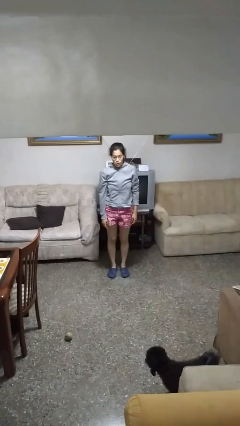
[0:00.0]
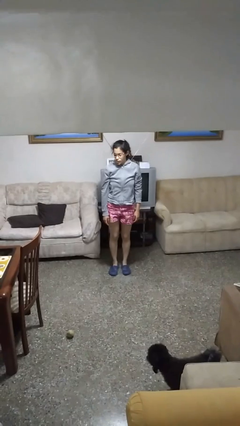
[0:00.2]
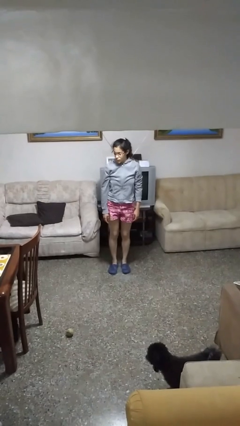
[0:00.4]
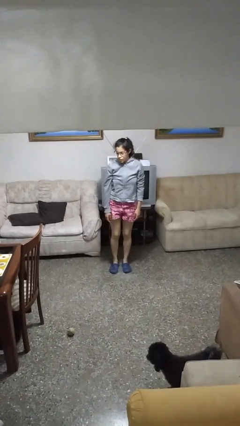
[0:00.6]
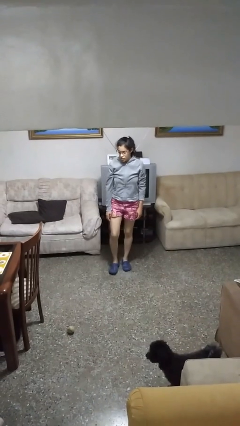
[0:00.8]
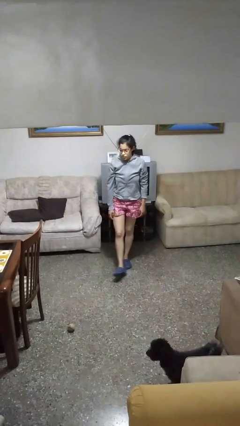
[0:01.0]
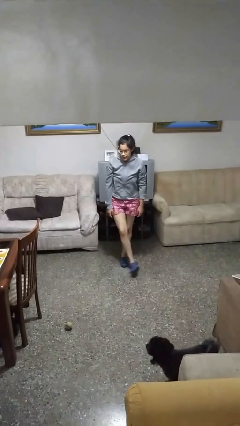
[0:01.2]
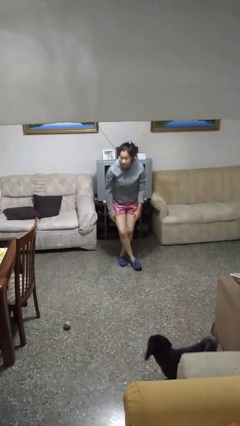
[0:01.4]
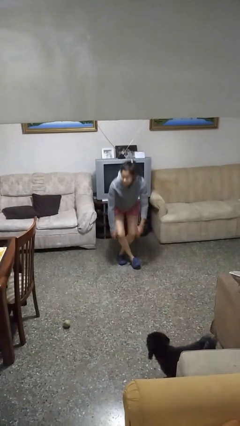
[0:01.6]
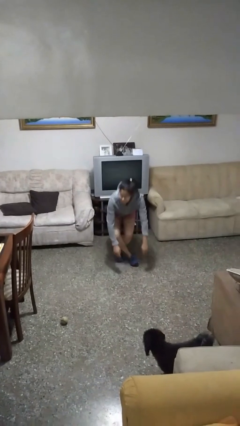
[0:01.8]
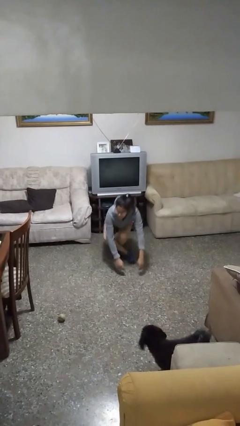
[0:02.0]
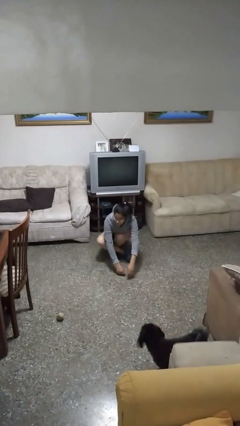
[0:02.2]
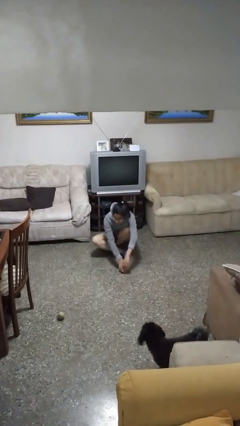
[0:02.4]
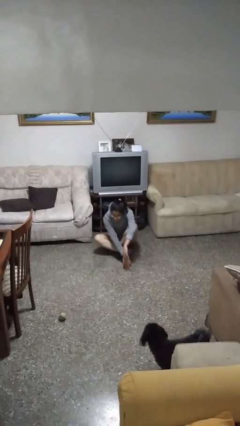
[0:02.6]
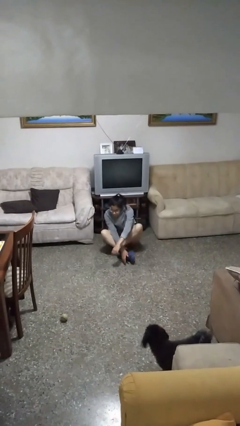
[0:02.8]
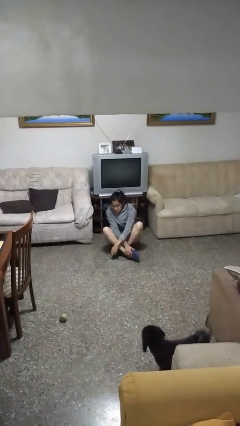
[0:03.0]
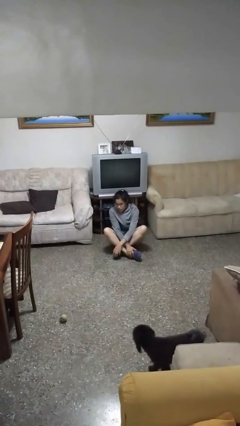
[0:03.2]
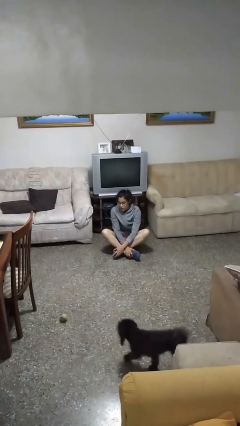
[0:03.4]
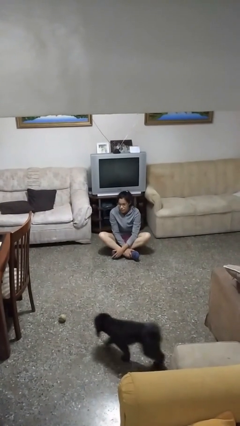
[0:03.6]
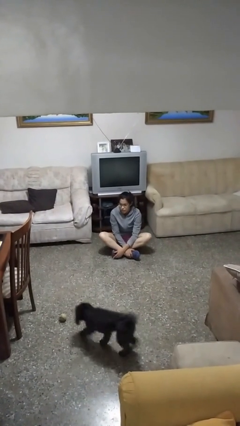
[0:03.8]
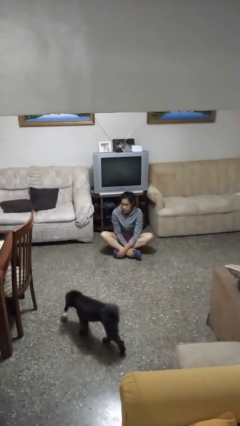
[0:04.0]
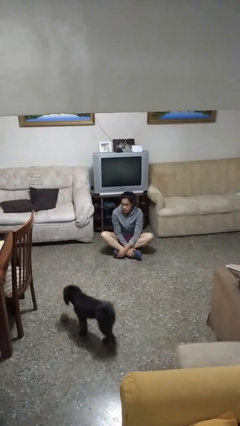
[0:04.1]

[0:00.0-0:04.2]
person sits crisscross

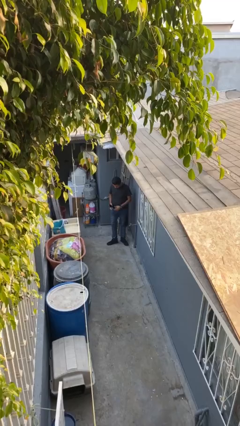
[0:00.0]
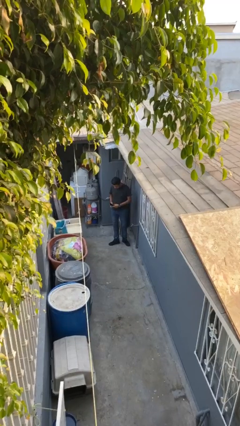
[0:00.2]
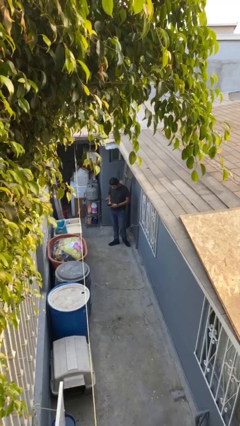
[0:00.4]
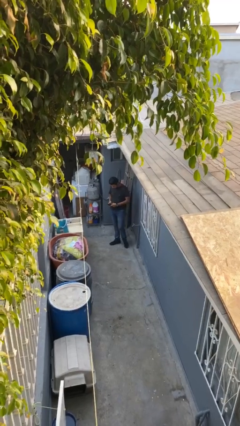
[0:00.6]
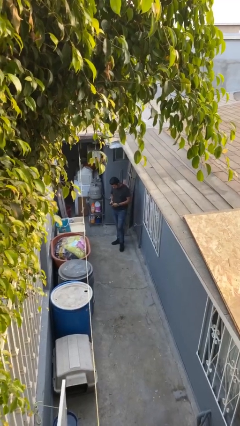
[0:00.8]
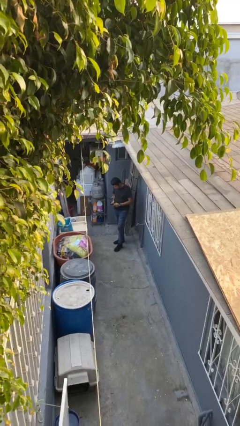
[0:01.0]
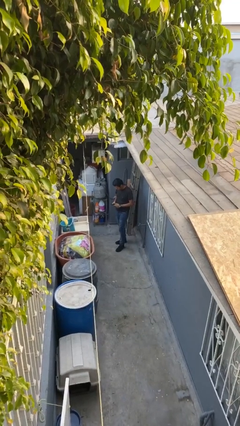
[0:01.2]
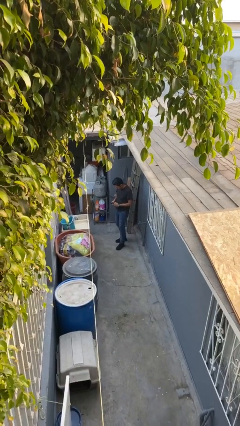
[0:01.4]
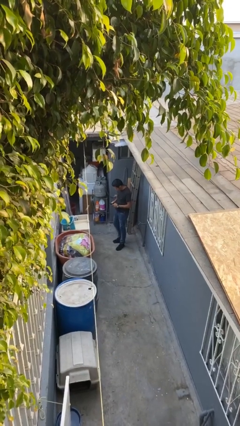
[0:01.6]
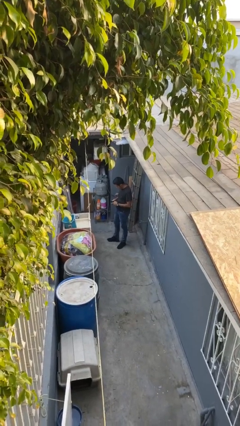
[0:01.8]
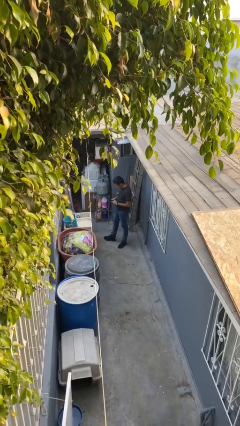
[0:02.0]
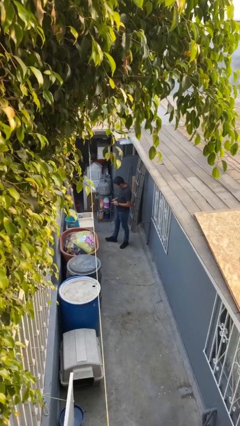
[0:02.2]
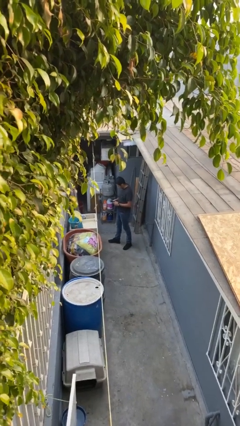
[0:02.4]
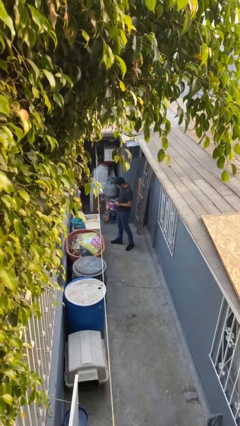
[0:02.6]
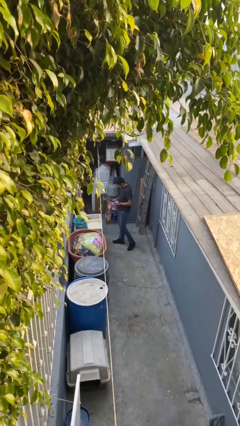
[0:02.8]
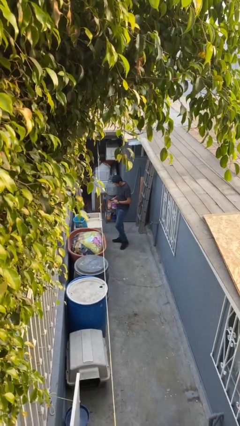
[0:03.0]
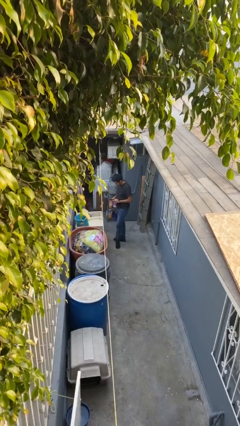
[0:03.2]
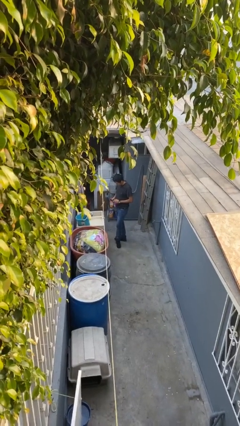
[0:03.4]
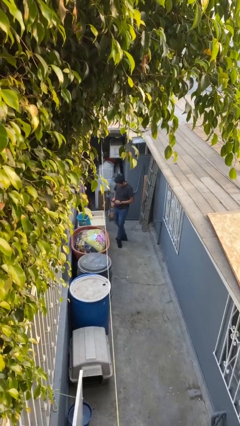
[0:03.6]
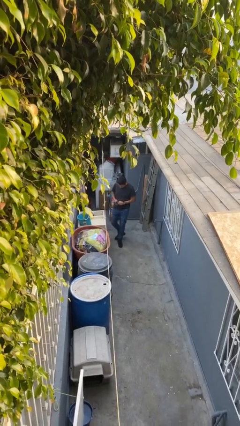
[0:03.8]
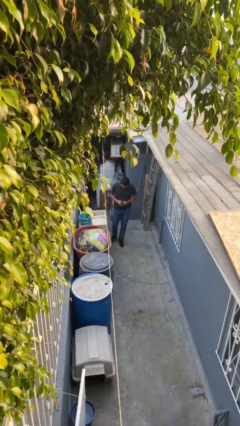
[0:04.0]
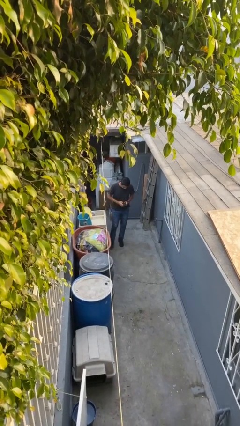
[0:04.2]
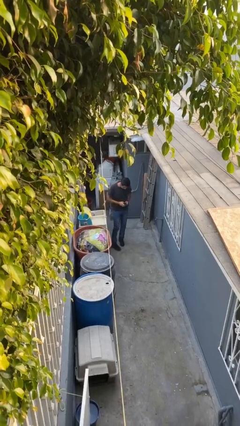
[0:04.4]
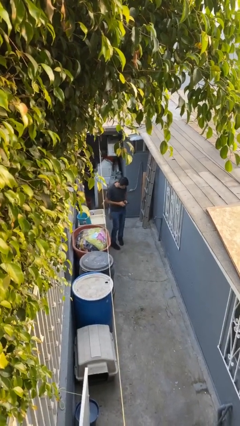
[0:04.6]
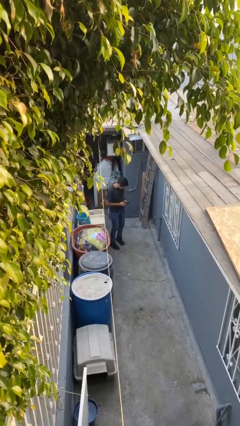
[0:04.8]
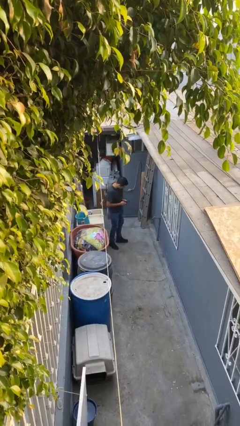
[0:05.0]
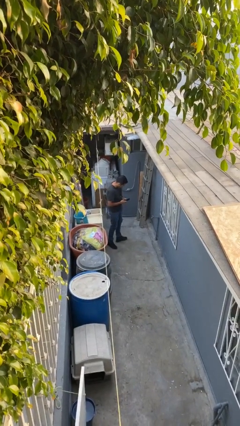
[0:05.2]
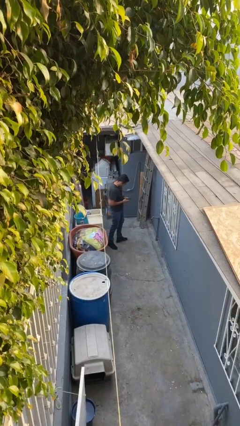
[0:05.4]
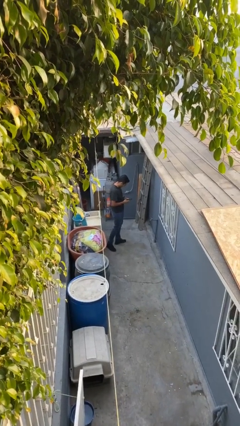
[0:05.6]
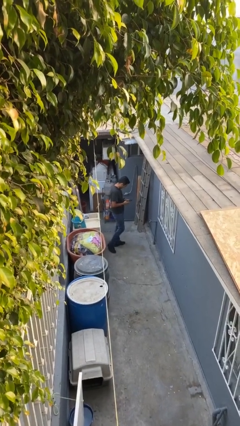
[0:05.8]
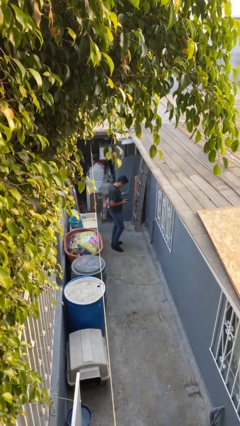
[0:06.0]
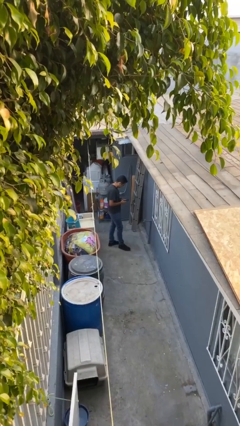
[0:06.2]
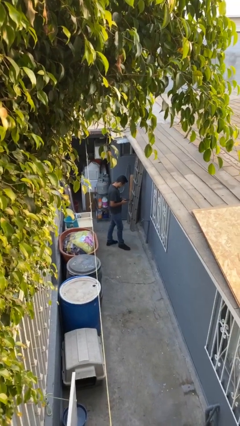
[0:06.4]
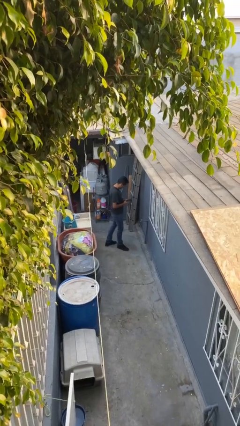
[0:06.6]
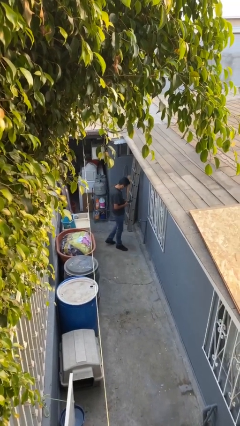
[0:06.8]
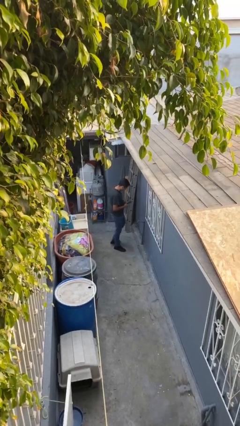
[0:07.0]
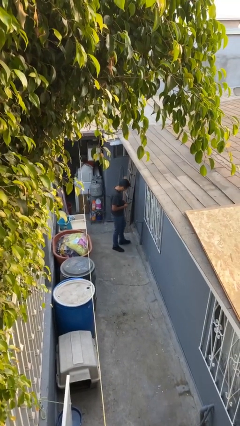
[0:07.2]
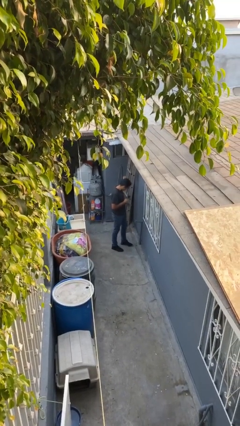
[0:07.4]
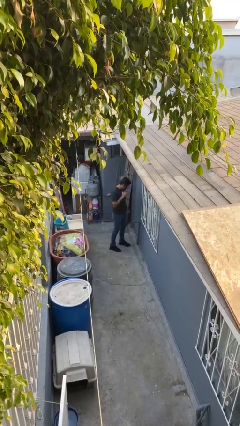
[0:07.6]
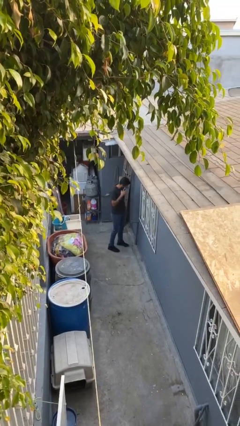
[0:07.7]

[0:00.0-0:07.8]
person texts on phone

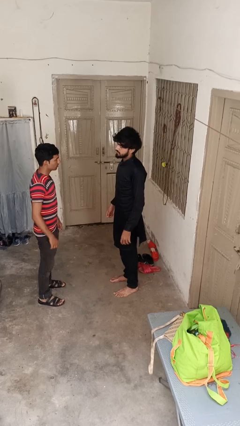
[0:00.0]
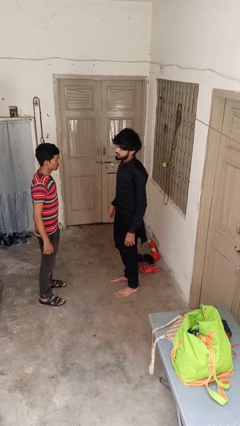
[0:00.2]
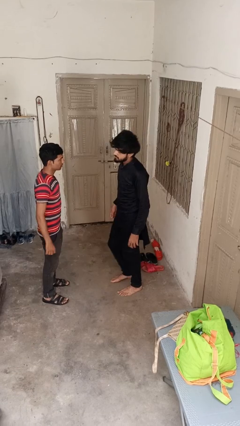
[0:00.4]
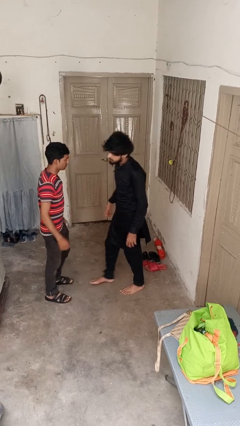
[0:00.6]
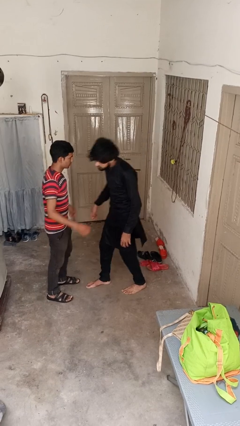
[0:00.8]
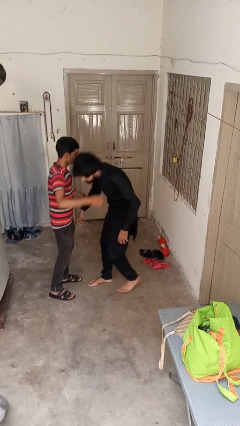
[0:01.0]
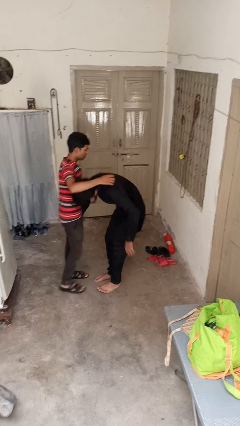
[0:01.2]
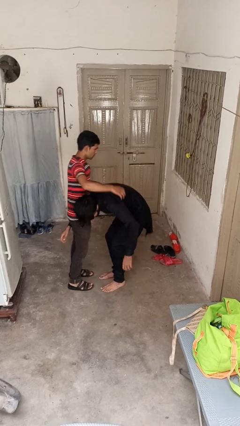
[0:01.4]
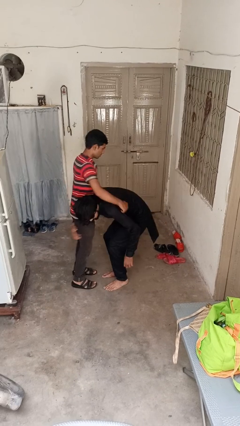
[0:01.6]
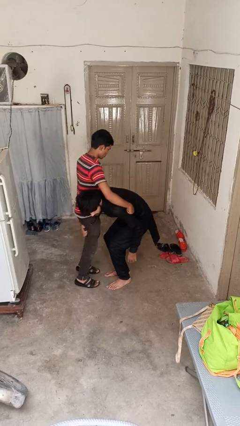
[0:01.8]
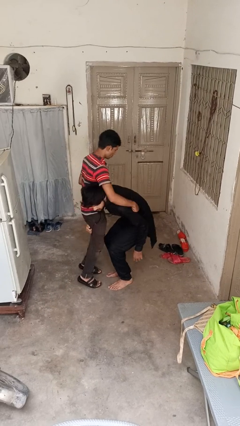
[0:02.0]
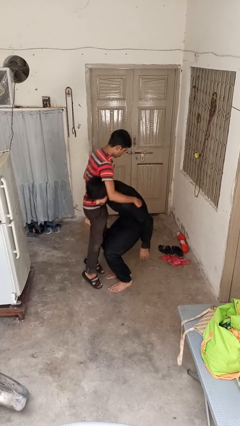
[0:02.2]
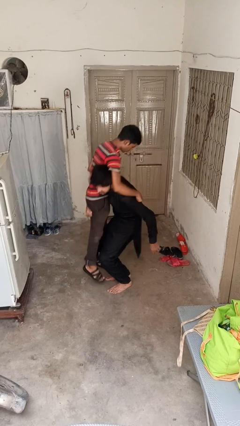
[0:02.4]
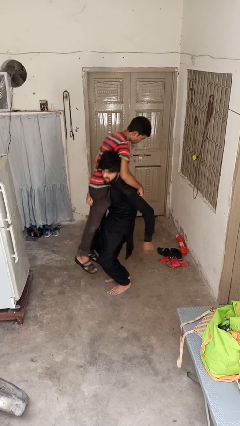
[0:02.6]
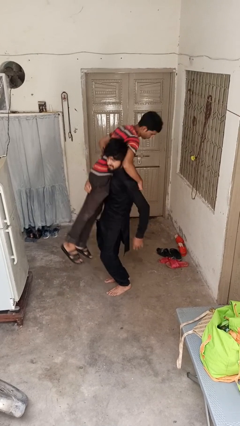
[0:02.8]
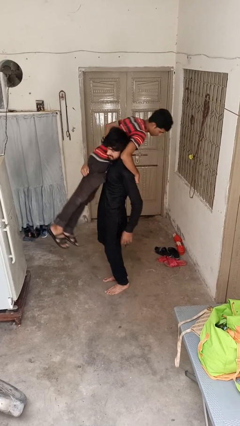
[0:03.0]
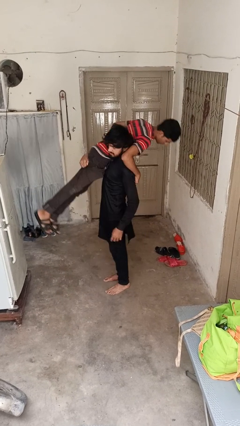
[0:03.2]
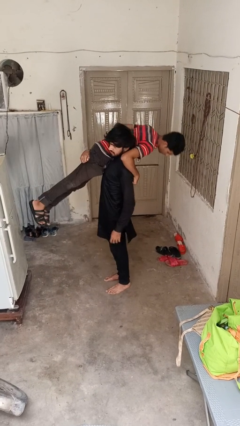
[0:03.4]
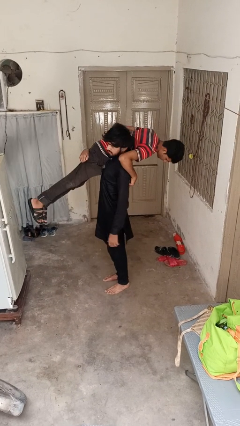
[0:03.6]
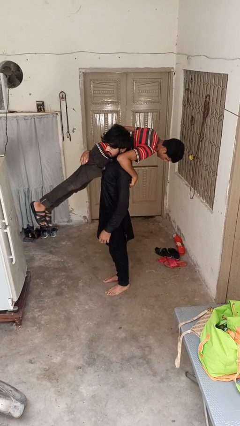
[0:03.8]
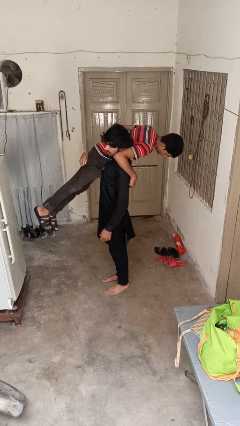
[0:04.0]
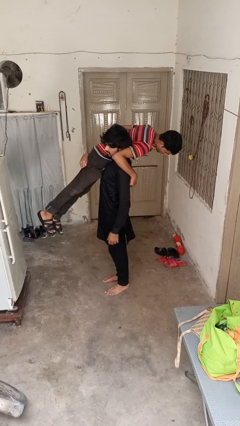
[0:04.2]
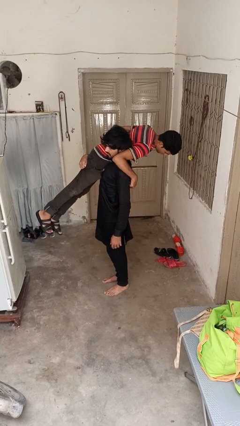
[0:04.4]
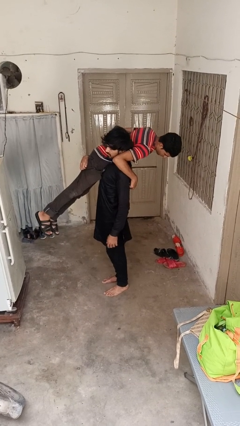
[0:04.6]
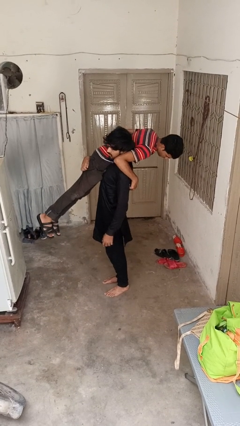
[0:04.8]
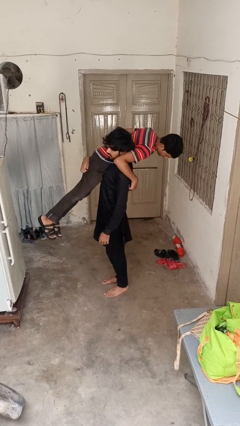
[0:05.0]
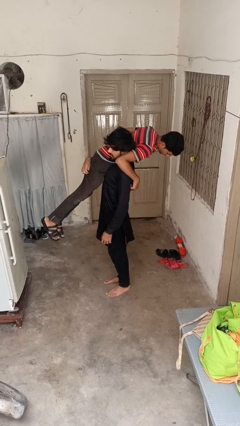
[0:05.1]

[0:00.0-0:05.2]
person carries person over shoulder

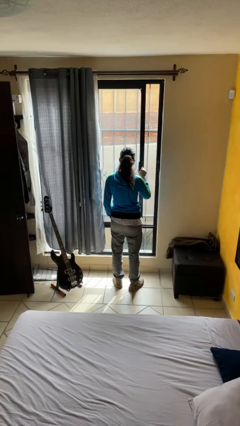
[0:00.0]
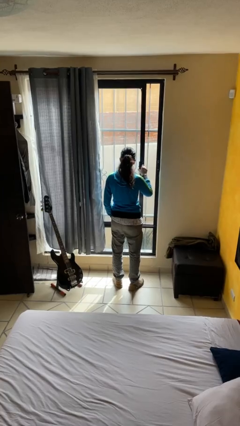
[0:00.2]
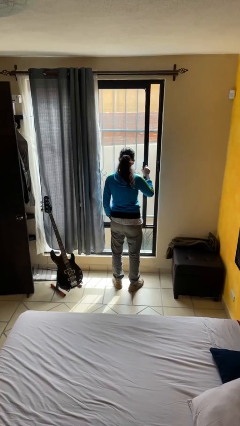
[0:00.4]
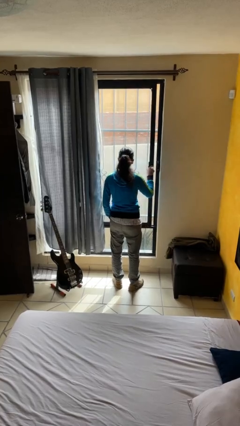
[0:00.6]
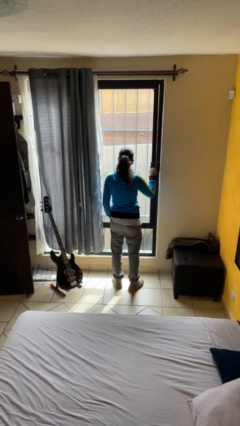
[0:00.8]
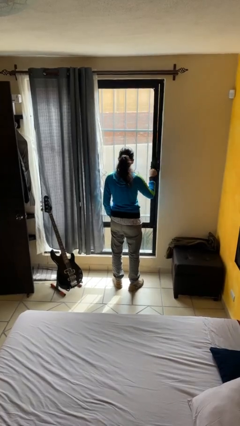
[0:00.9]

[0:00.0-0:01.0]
person closes home window
